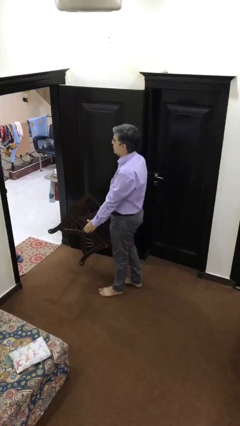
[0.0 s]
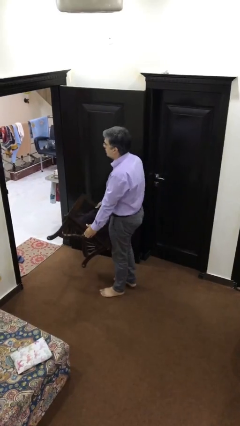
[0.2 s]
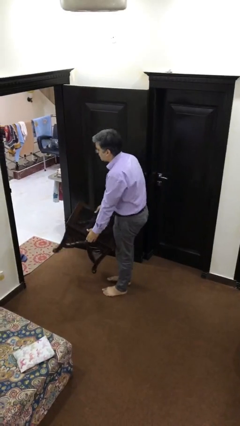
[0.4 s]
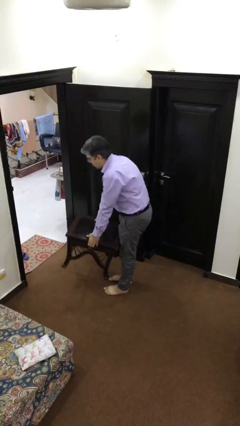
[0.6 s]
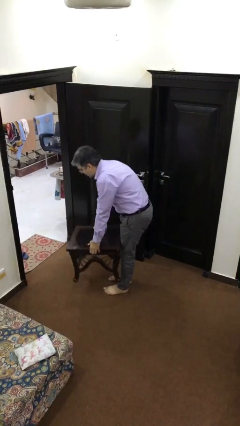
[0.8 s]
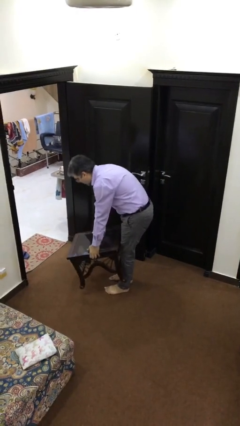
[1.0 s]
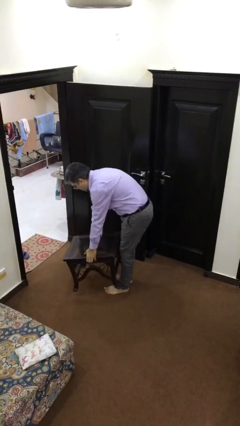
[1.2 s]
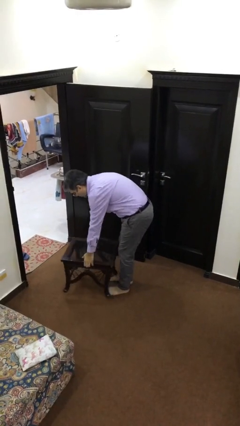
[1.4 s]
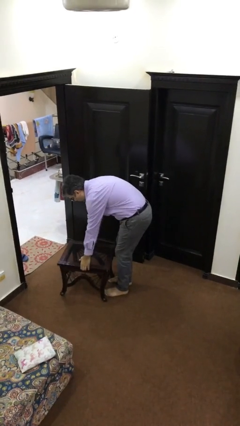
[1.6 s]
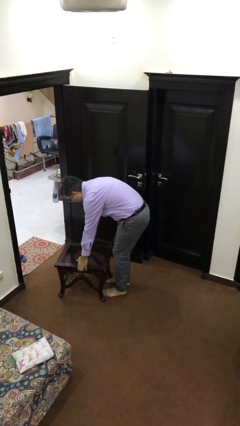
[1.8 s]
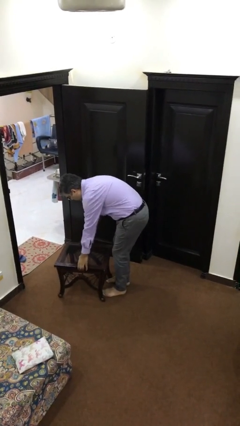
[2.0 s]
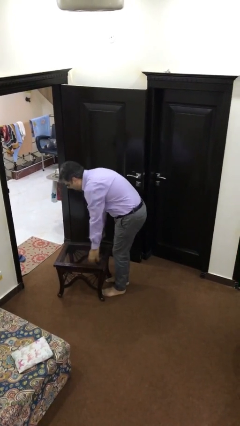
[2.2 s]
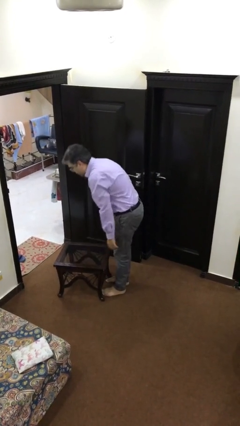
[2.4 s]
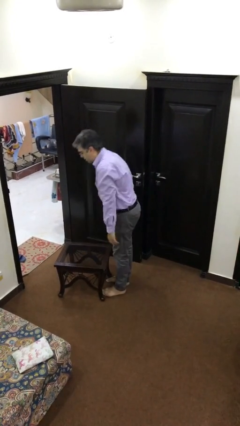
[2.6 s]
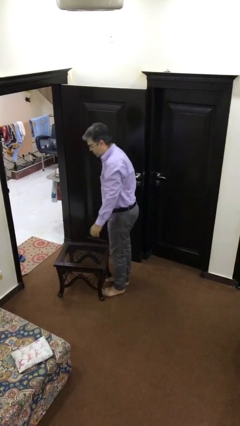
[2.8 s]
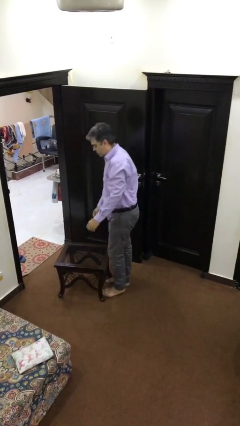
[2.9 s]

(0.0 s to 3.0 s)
person puts down object on floor

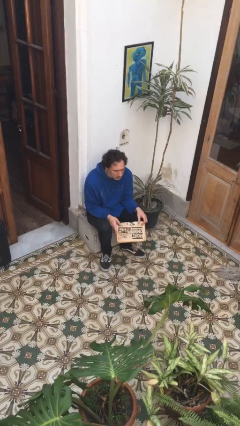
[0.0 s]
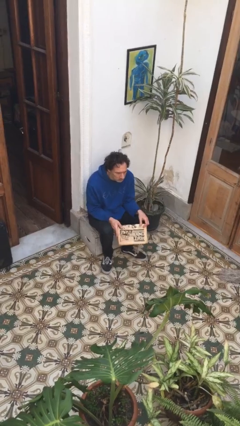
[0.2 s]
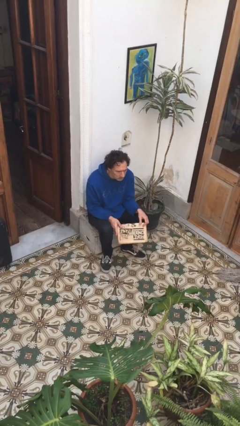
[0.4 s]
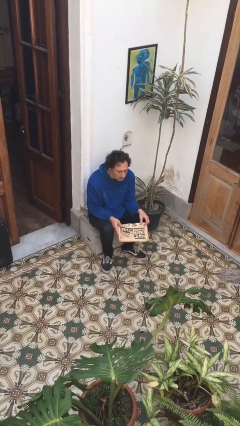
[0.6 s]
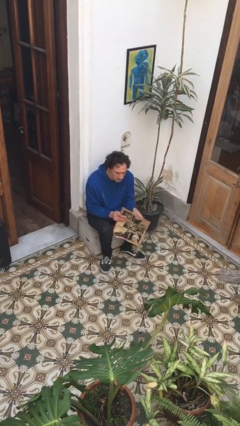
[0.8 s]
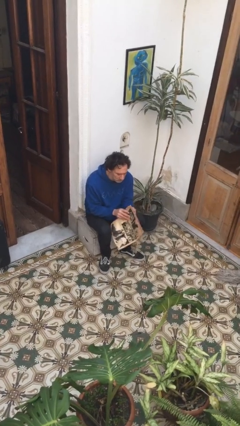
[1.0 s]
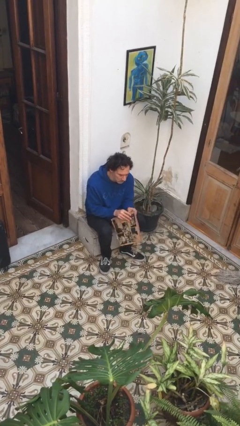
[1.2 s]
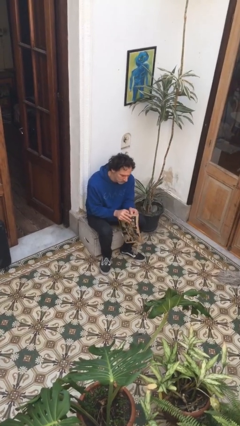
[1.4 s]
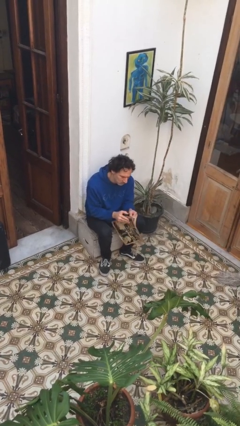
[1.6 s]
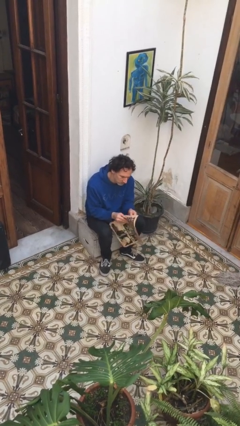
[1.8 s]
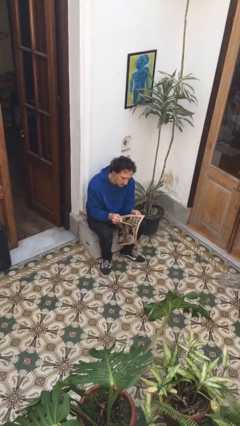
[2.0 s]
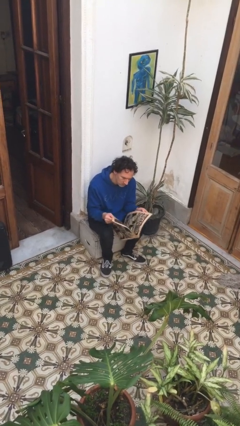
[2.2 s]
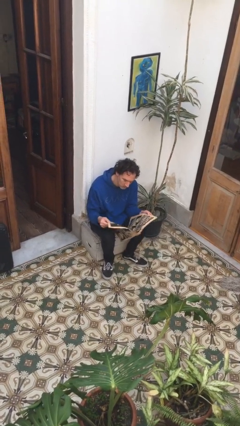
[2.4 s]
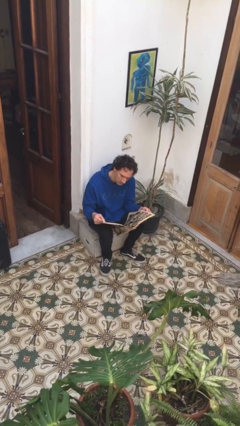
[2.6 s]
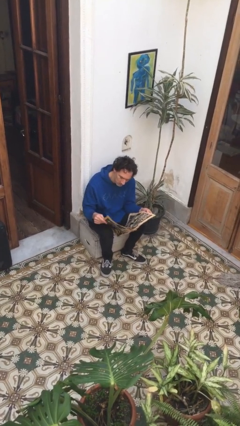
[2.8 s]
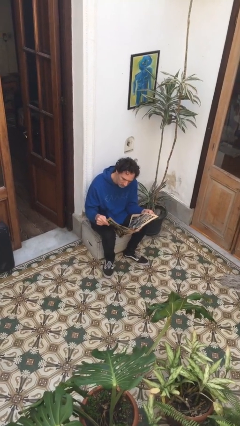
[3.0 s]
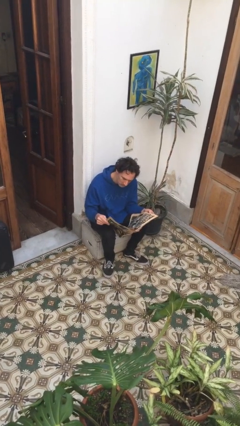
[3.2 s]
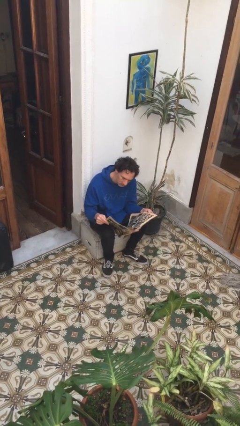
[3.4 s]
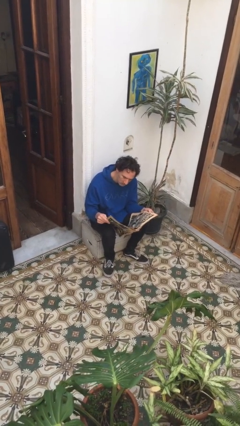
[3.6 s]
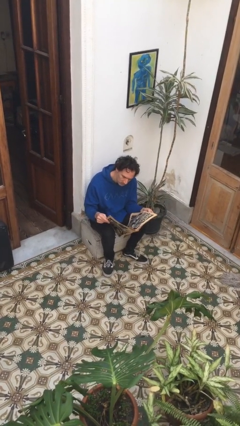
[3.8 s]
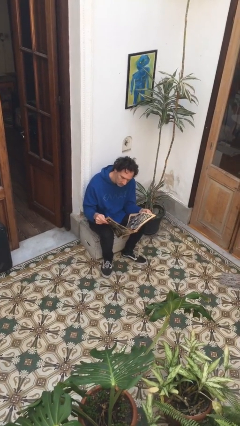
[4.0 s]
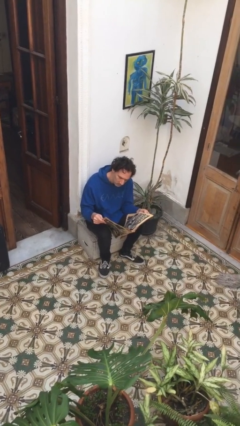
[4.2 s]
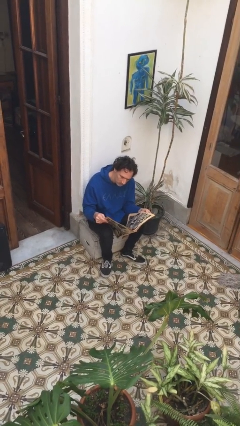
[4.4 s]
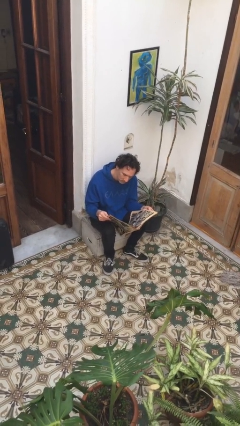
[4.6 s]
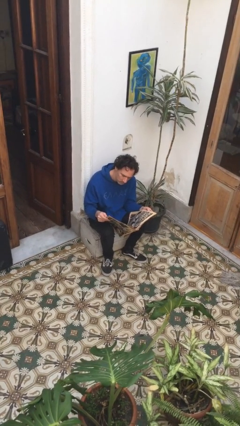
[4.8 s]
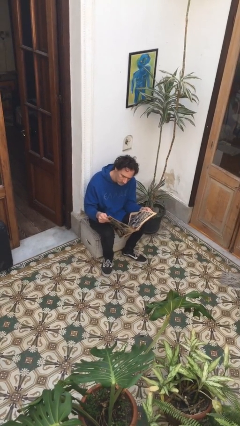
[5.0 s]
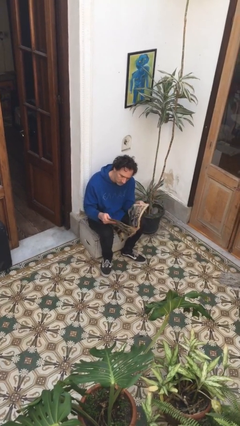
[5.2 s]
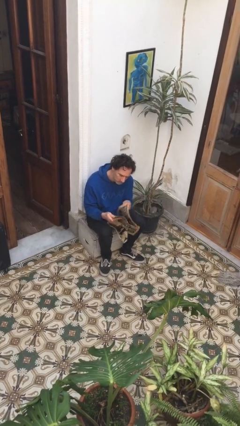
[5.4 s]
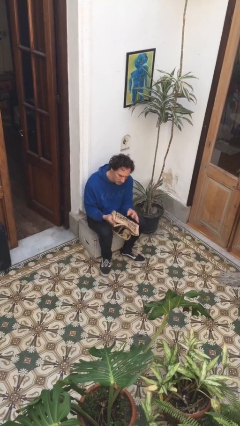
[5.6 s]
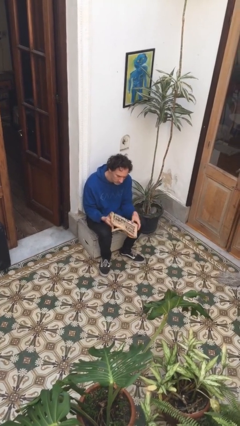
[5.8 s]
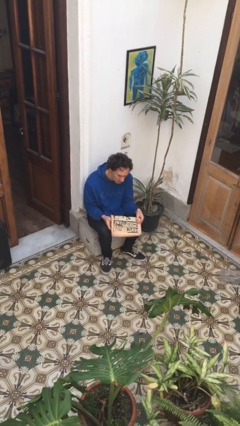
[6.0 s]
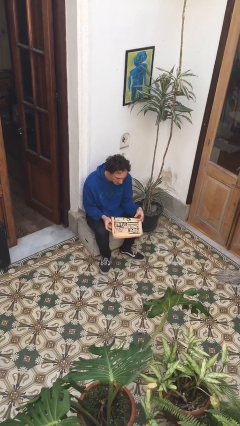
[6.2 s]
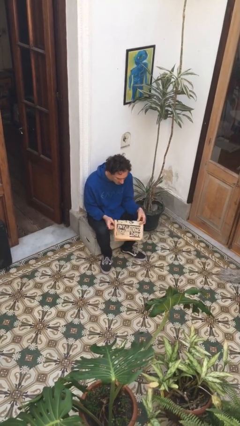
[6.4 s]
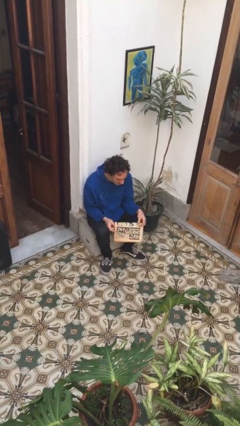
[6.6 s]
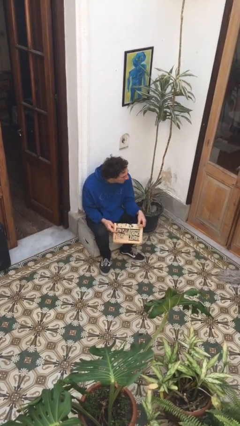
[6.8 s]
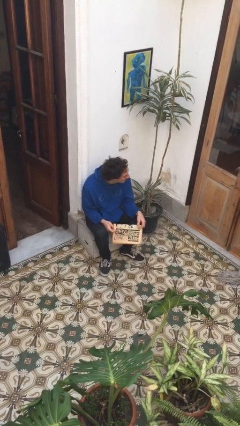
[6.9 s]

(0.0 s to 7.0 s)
person reads newspaper

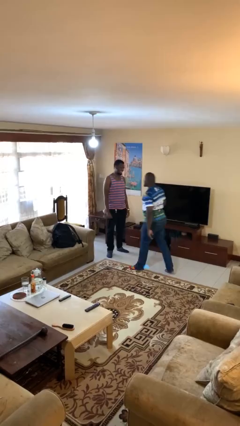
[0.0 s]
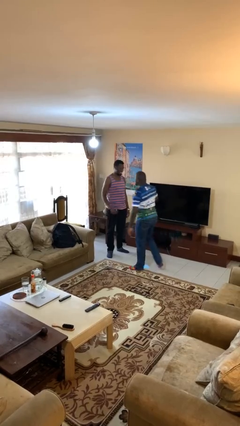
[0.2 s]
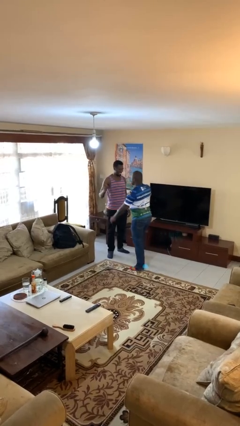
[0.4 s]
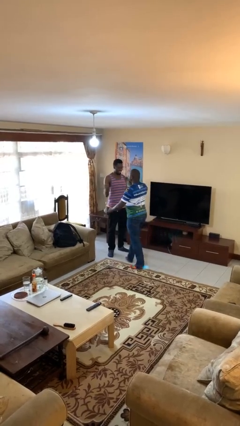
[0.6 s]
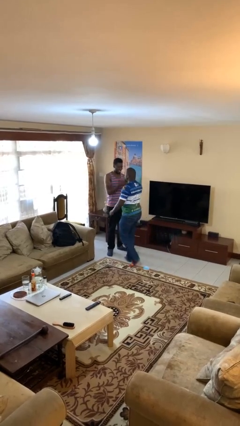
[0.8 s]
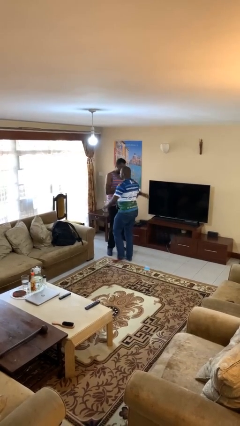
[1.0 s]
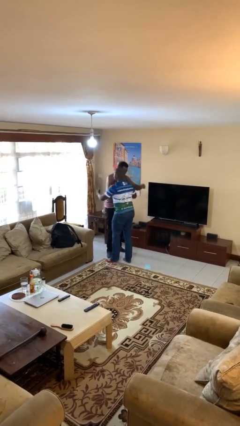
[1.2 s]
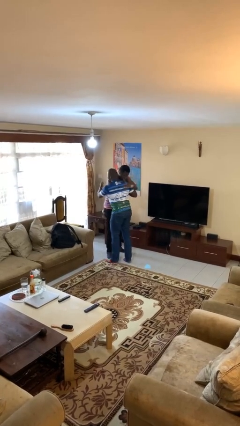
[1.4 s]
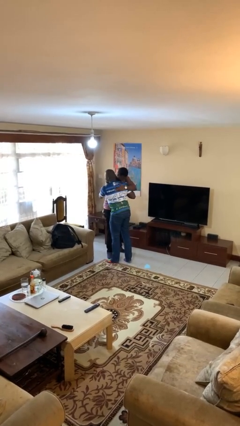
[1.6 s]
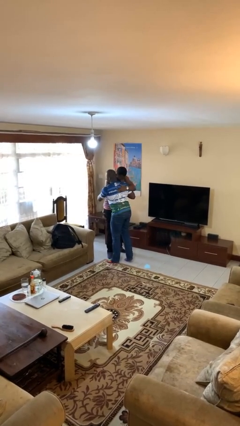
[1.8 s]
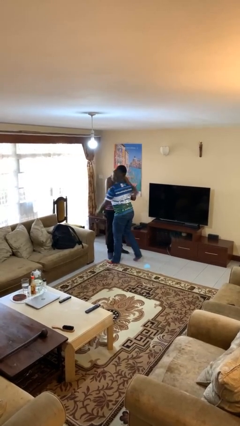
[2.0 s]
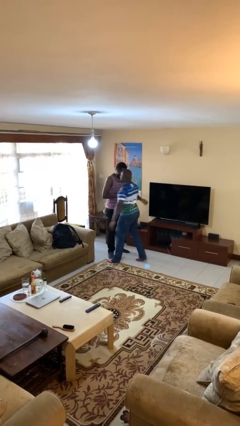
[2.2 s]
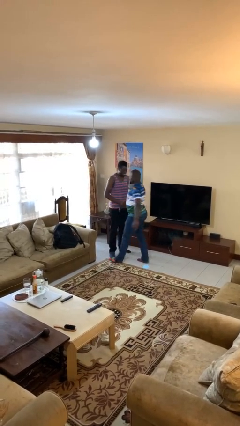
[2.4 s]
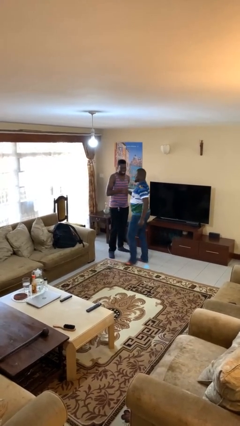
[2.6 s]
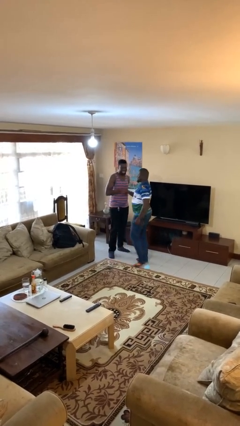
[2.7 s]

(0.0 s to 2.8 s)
person embraces person

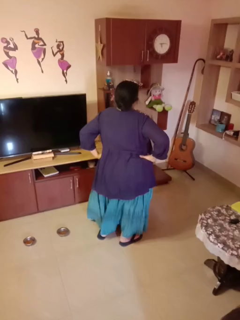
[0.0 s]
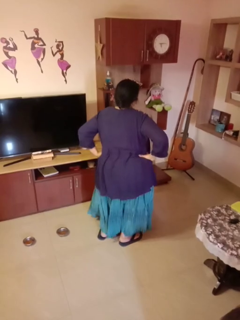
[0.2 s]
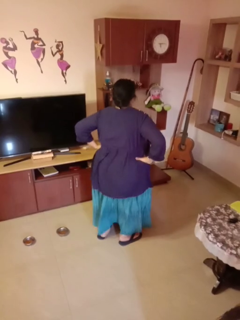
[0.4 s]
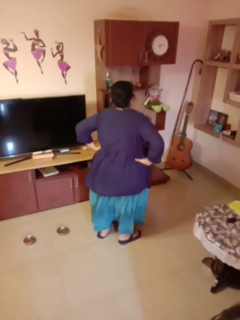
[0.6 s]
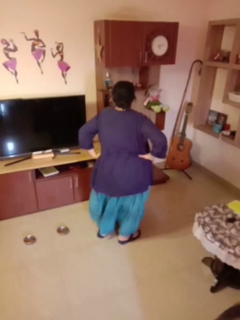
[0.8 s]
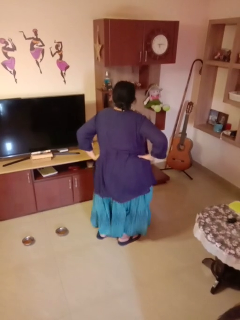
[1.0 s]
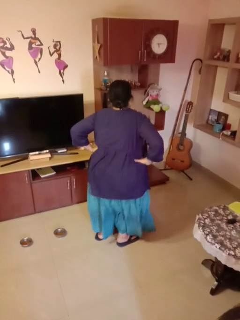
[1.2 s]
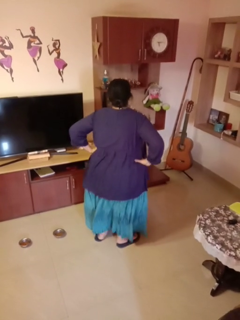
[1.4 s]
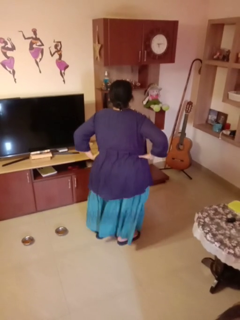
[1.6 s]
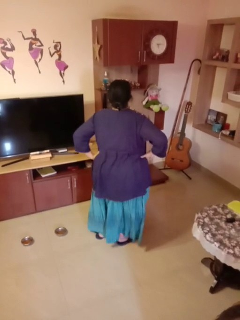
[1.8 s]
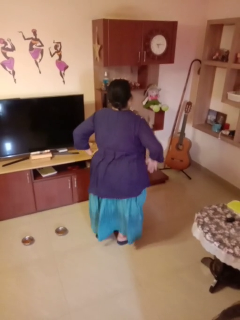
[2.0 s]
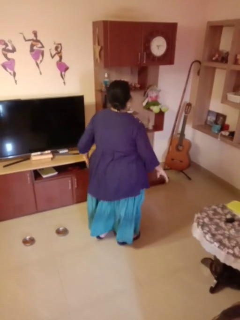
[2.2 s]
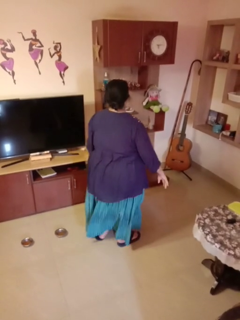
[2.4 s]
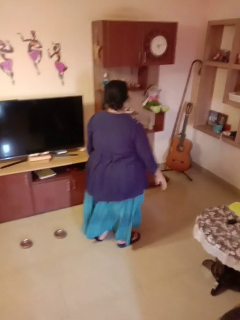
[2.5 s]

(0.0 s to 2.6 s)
person wiggles hips

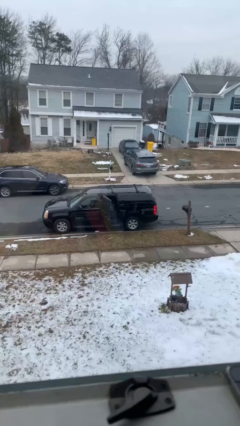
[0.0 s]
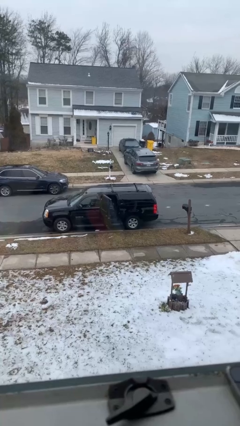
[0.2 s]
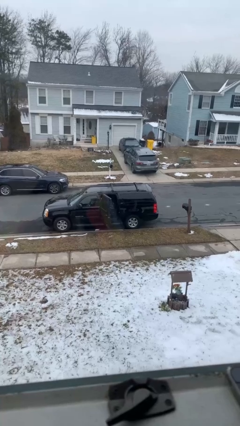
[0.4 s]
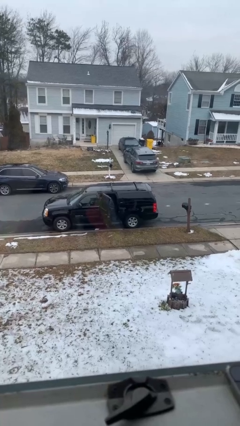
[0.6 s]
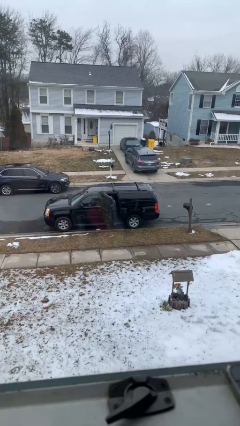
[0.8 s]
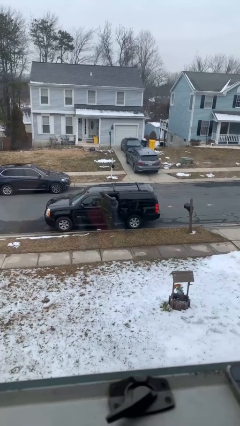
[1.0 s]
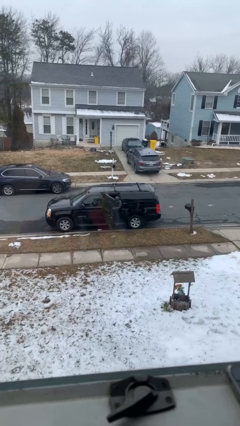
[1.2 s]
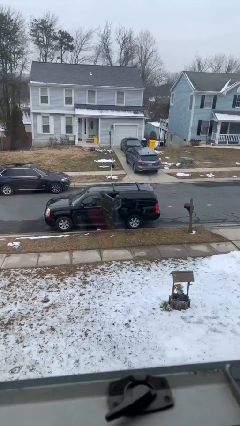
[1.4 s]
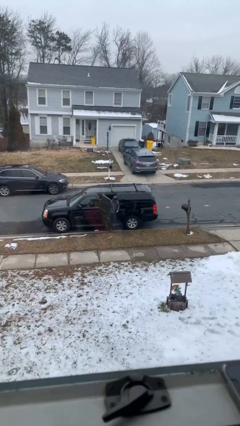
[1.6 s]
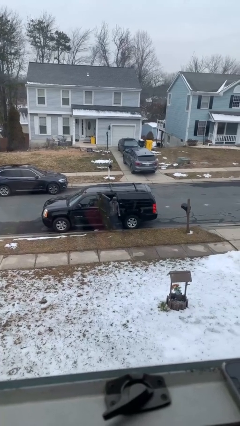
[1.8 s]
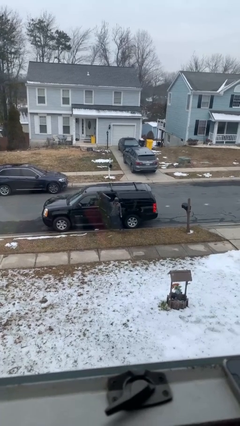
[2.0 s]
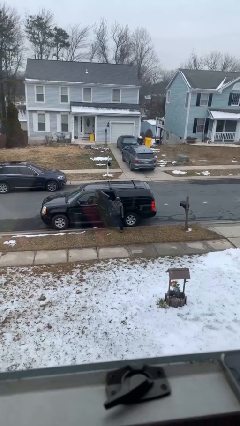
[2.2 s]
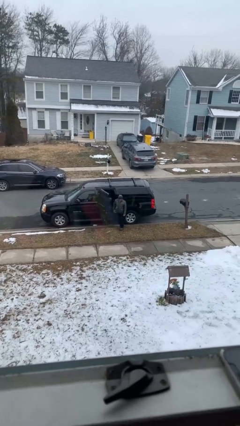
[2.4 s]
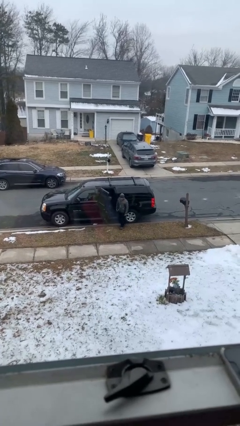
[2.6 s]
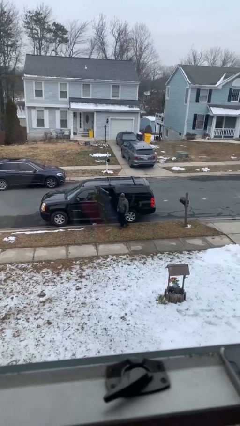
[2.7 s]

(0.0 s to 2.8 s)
person exits car
